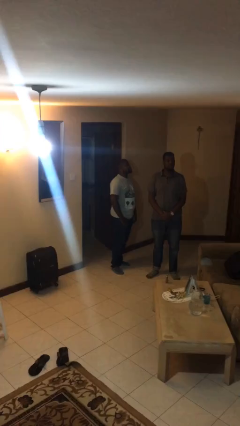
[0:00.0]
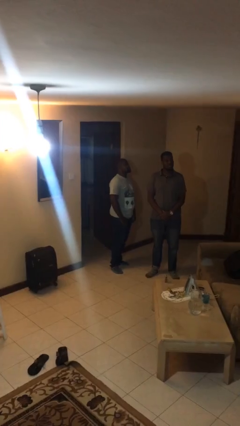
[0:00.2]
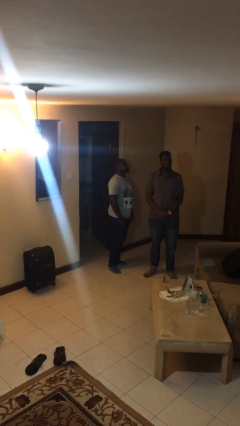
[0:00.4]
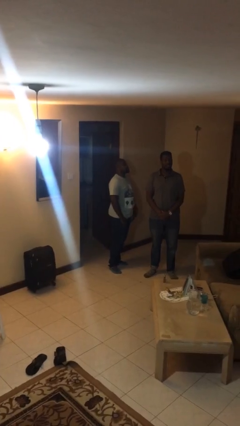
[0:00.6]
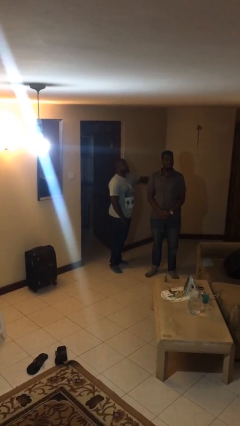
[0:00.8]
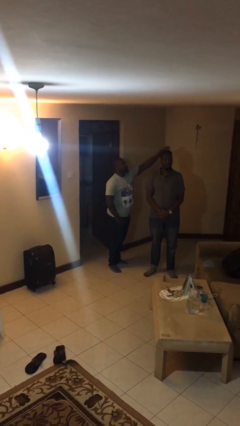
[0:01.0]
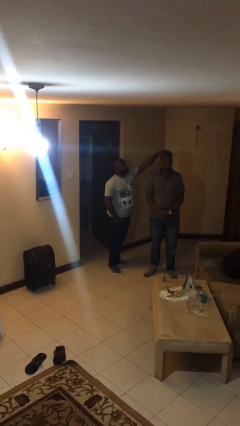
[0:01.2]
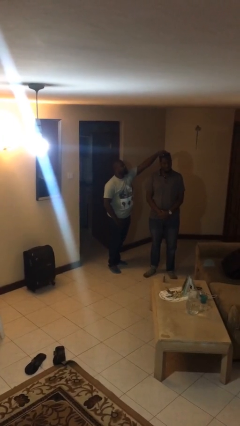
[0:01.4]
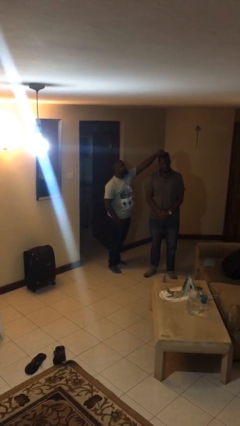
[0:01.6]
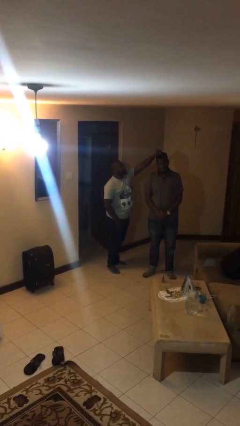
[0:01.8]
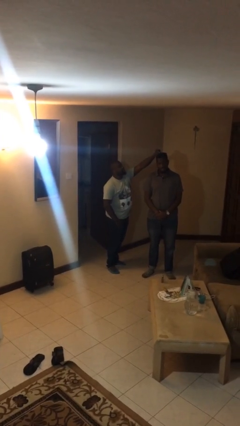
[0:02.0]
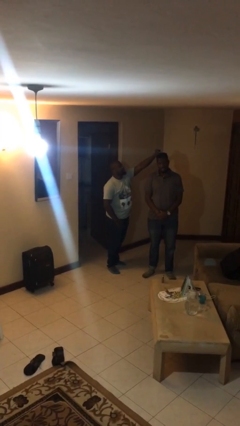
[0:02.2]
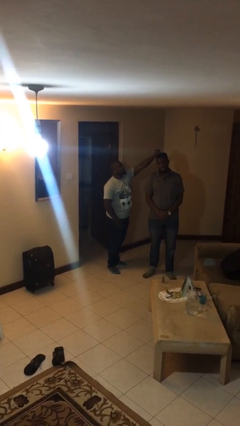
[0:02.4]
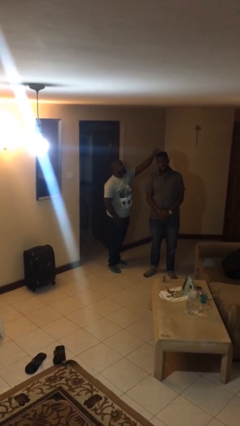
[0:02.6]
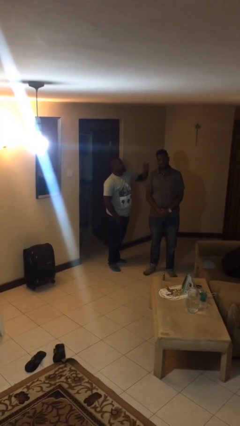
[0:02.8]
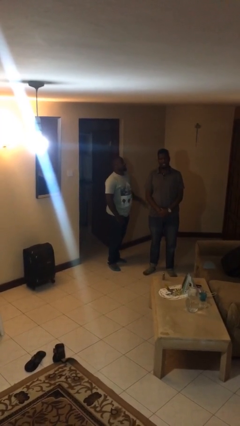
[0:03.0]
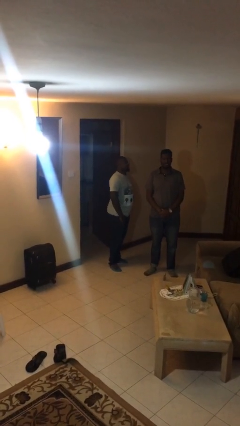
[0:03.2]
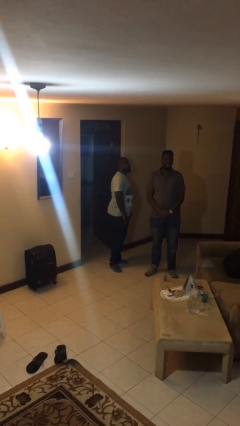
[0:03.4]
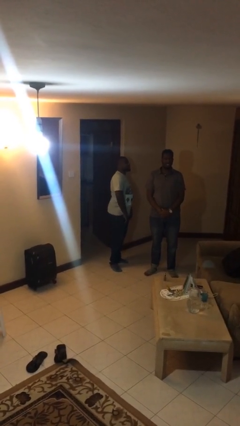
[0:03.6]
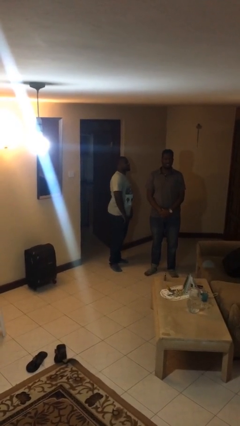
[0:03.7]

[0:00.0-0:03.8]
person grabs person by hair

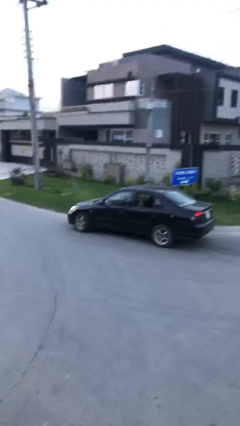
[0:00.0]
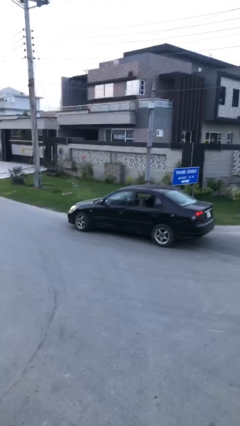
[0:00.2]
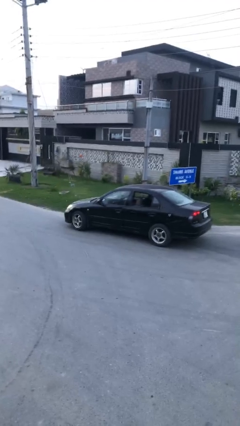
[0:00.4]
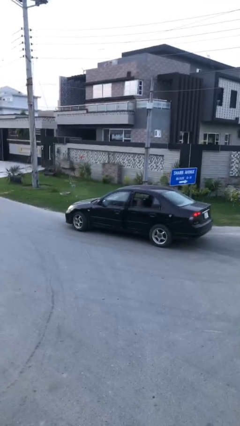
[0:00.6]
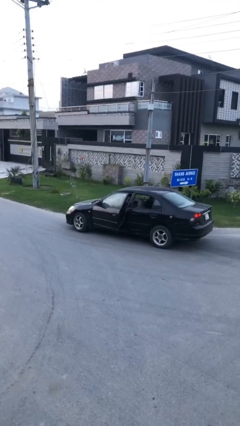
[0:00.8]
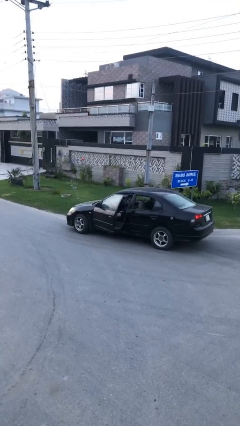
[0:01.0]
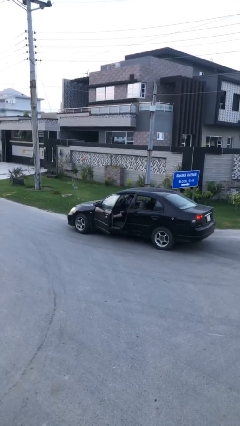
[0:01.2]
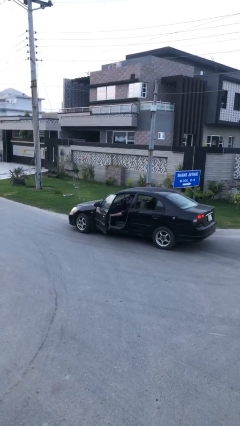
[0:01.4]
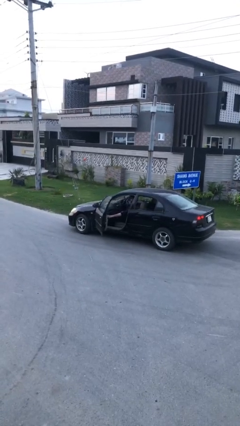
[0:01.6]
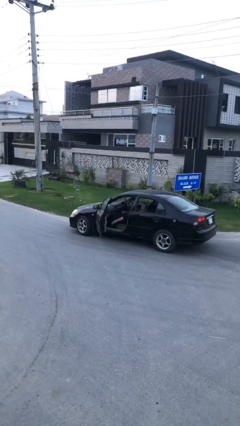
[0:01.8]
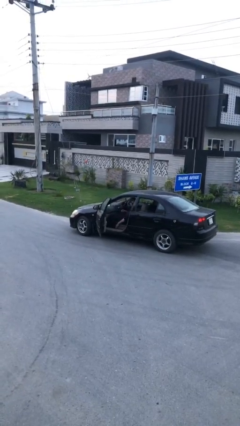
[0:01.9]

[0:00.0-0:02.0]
person opens car door

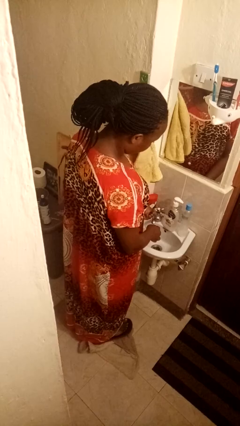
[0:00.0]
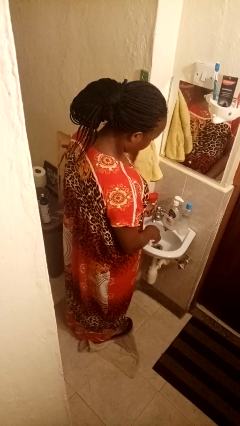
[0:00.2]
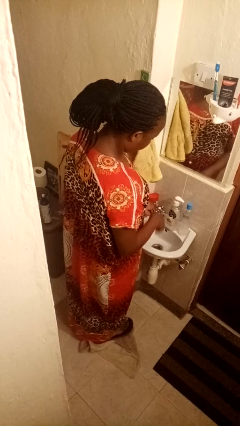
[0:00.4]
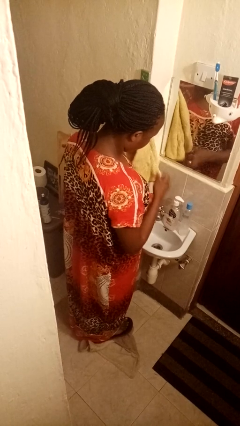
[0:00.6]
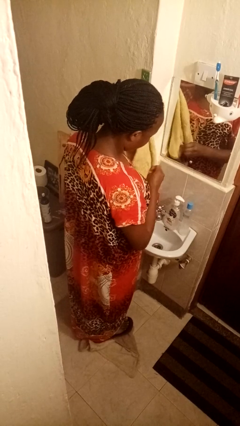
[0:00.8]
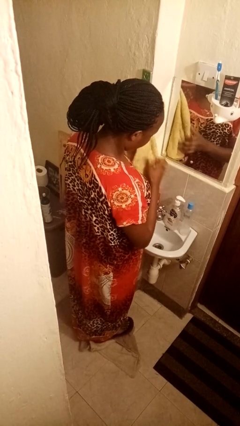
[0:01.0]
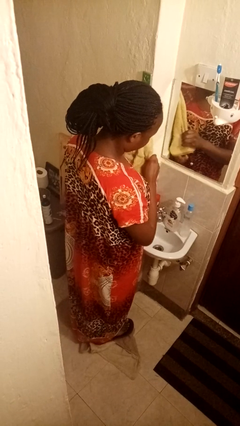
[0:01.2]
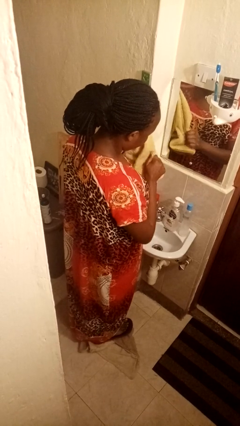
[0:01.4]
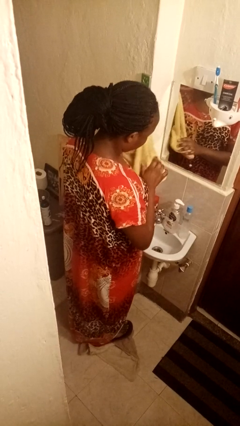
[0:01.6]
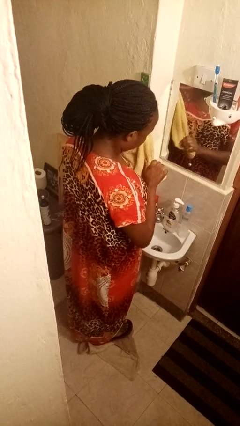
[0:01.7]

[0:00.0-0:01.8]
person dries hands with towel

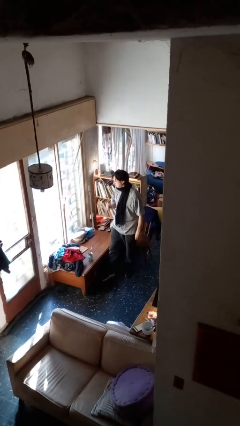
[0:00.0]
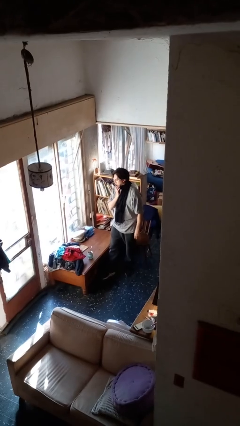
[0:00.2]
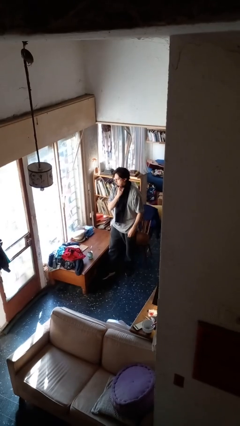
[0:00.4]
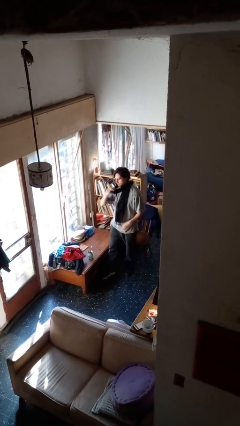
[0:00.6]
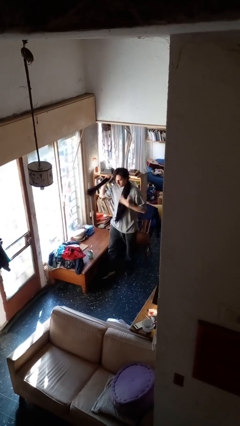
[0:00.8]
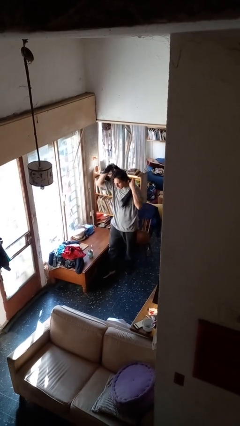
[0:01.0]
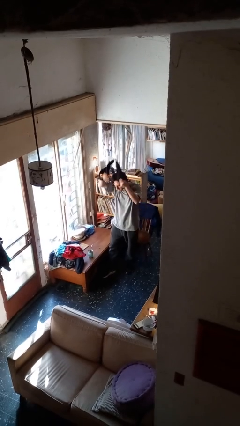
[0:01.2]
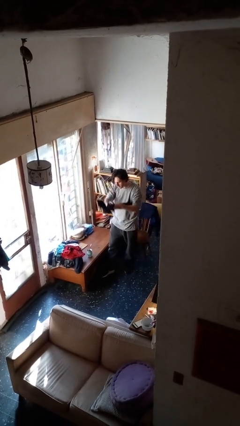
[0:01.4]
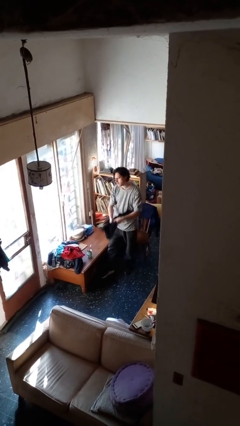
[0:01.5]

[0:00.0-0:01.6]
person takes off scarf

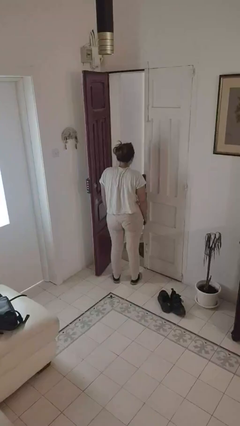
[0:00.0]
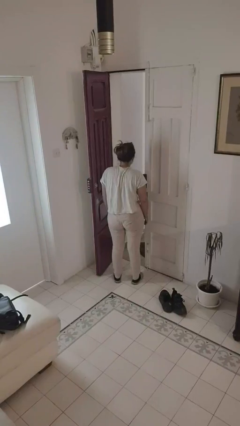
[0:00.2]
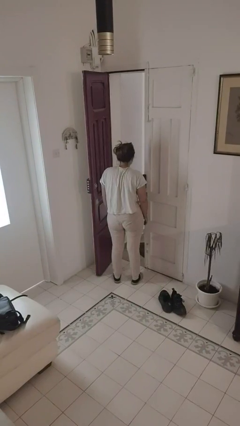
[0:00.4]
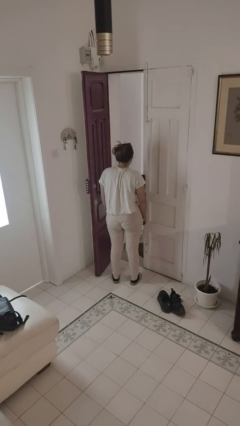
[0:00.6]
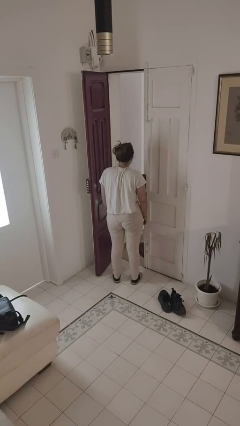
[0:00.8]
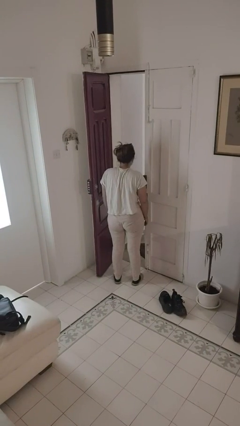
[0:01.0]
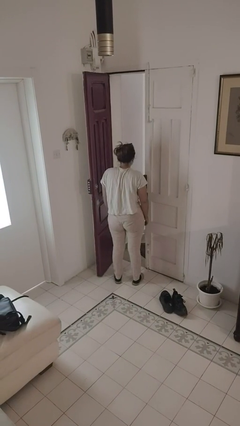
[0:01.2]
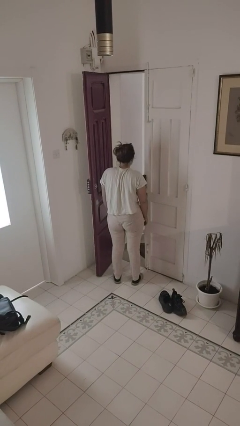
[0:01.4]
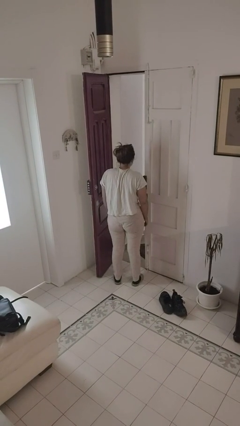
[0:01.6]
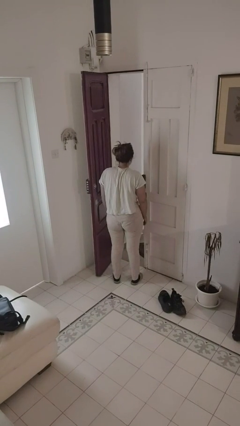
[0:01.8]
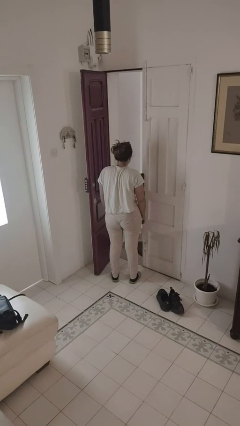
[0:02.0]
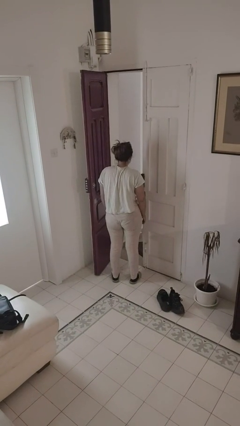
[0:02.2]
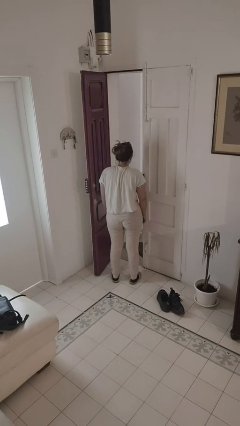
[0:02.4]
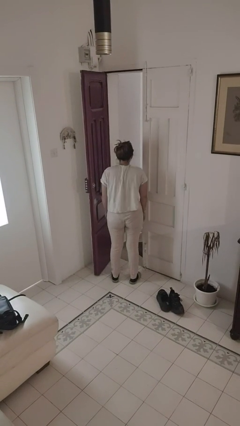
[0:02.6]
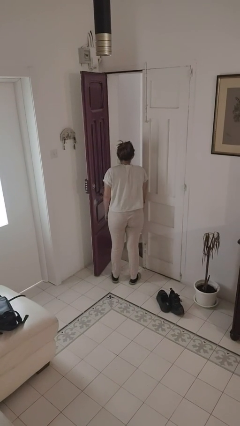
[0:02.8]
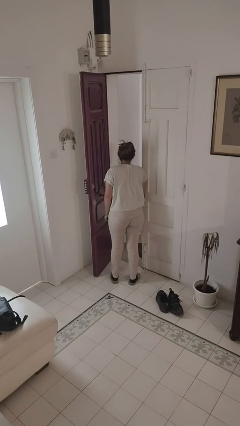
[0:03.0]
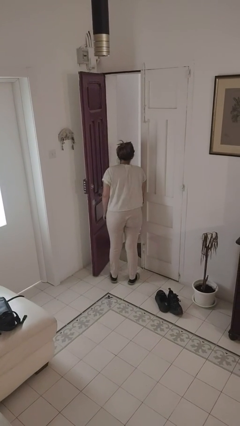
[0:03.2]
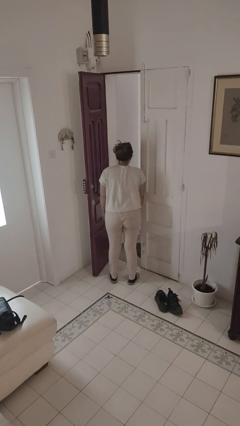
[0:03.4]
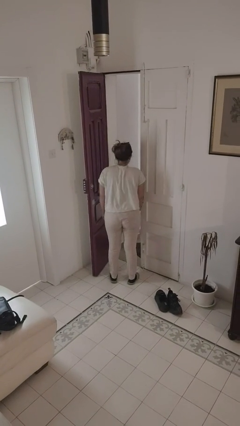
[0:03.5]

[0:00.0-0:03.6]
person bumps into wall

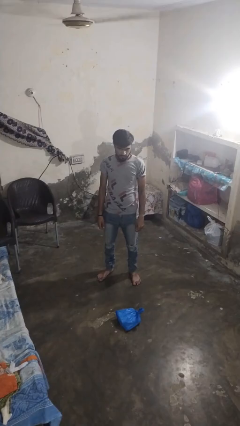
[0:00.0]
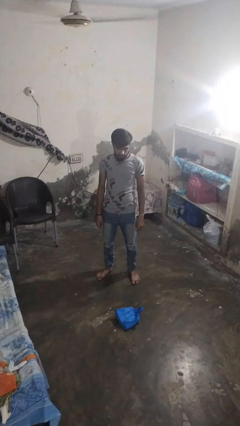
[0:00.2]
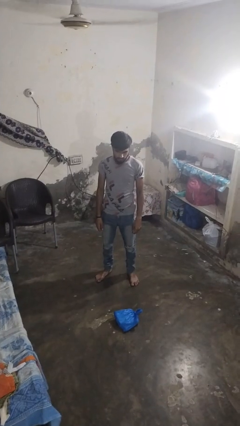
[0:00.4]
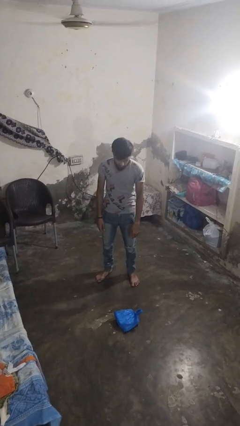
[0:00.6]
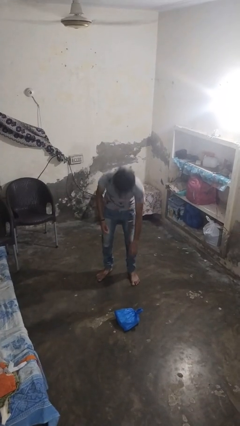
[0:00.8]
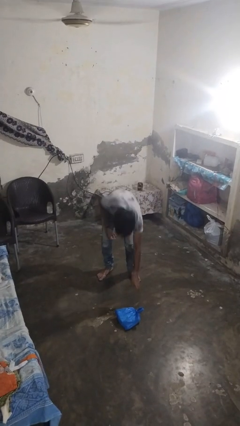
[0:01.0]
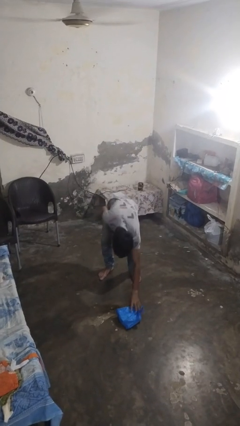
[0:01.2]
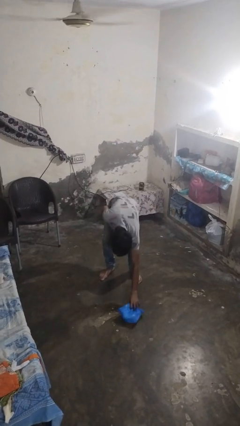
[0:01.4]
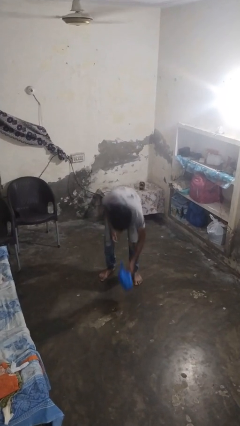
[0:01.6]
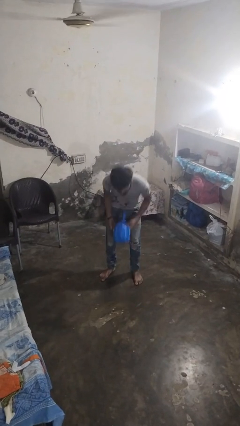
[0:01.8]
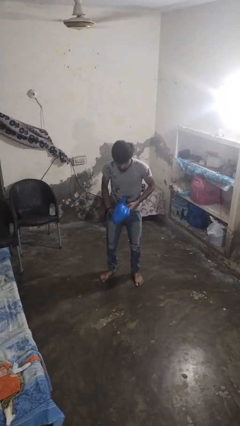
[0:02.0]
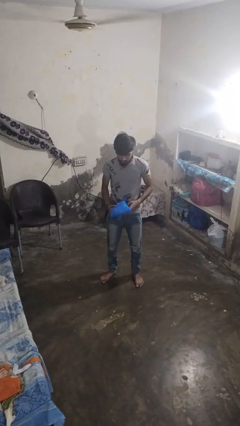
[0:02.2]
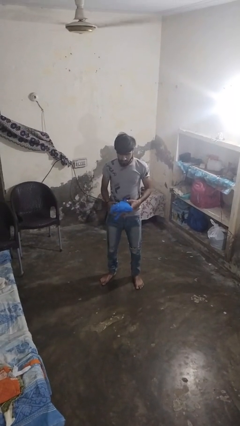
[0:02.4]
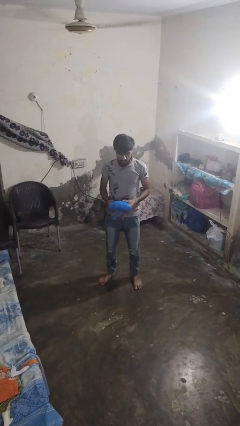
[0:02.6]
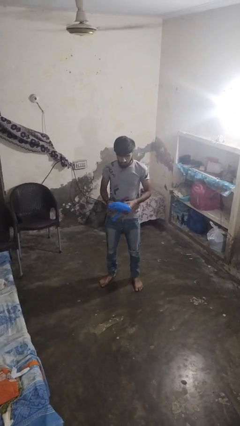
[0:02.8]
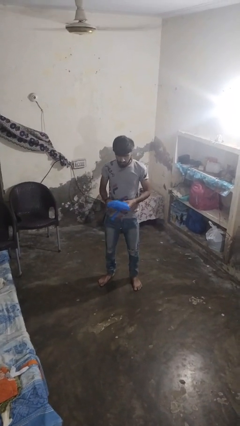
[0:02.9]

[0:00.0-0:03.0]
person picks up object from floor

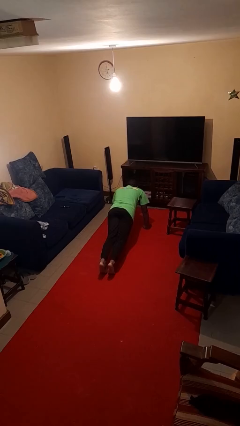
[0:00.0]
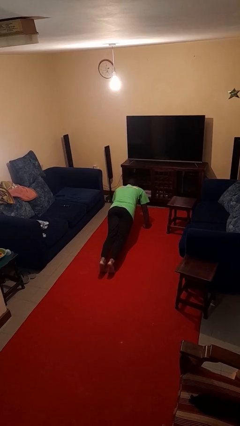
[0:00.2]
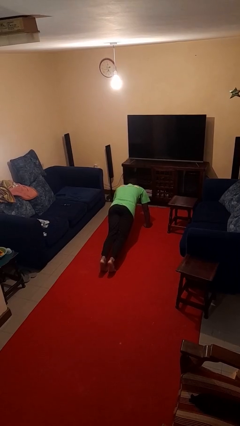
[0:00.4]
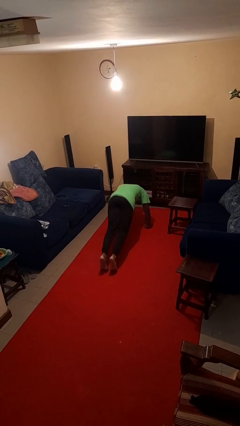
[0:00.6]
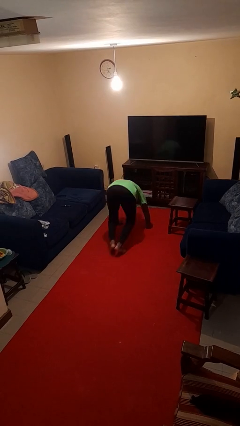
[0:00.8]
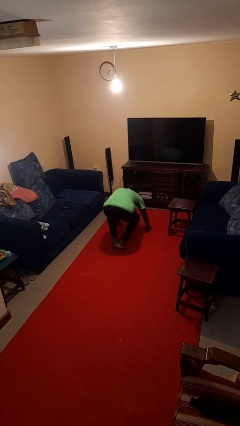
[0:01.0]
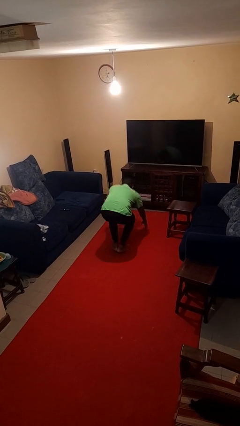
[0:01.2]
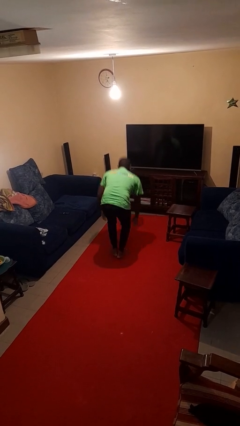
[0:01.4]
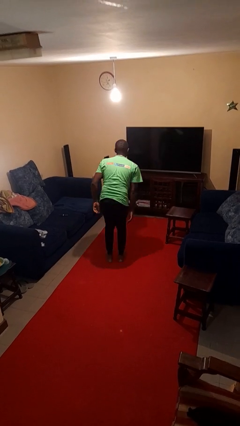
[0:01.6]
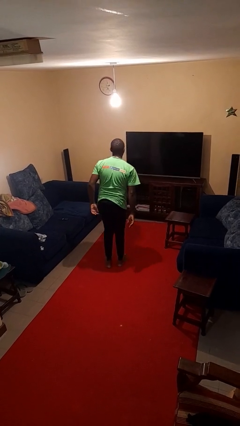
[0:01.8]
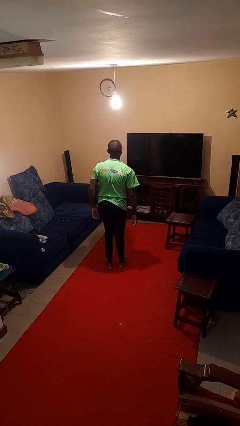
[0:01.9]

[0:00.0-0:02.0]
person stands up from floor
